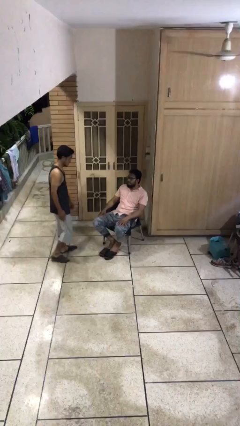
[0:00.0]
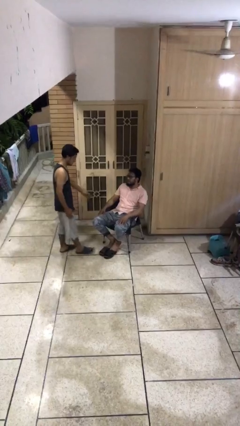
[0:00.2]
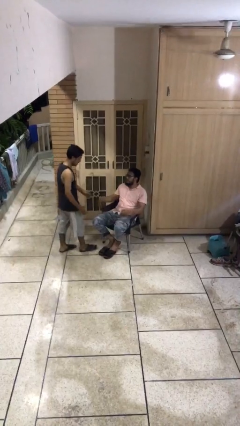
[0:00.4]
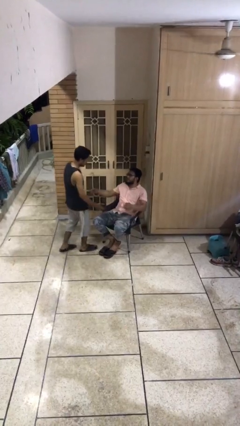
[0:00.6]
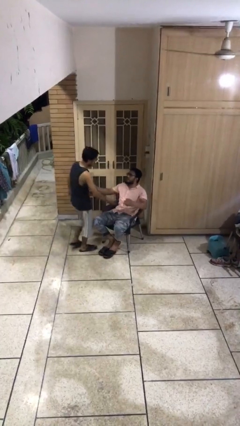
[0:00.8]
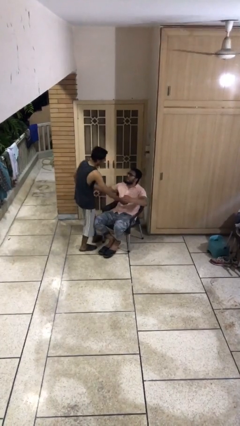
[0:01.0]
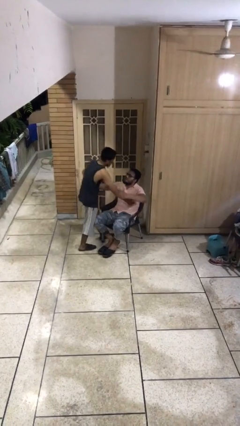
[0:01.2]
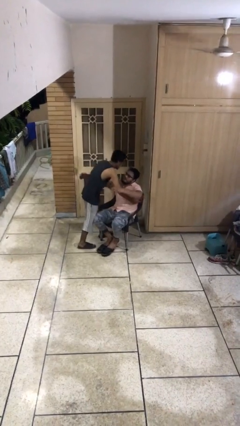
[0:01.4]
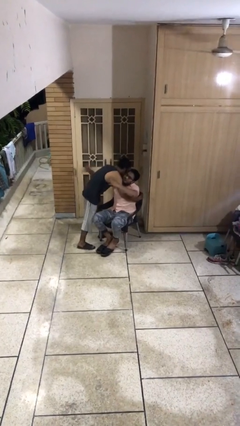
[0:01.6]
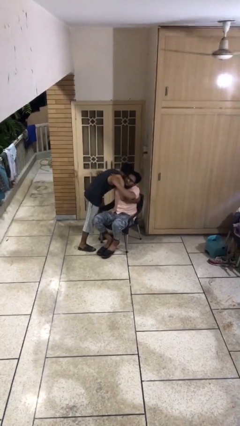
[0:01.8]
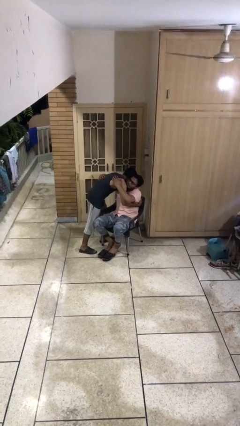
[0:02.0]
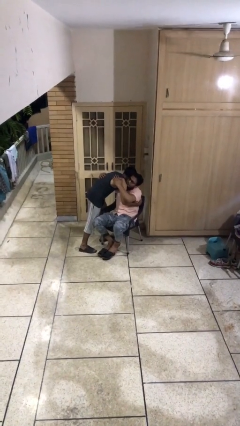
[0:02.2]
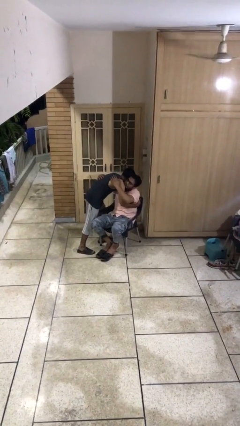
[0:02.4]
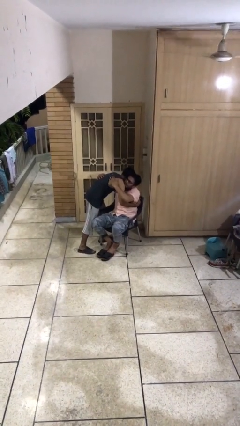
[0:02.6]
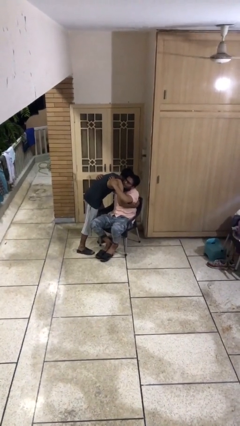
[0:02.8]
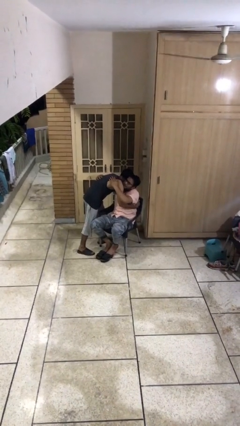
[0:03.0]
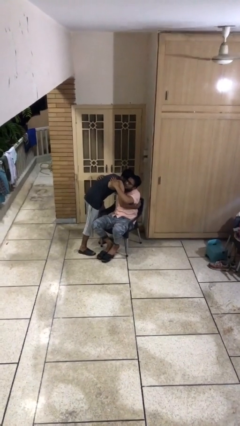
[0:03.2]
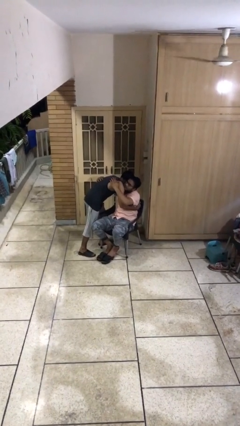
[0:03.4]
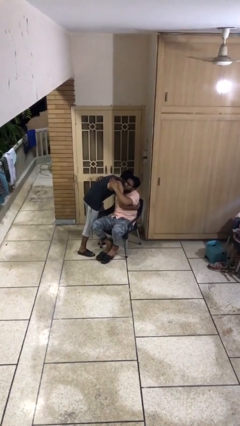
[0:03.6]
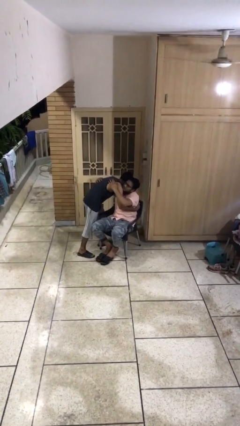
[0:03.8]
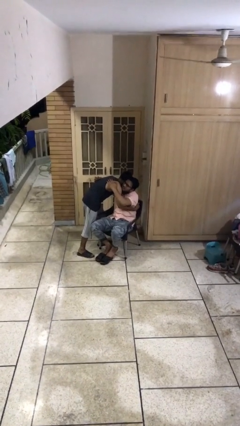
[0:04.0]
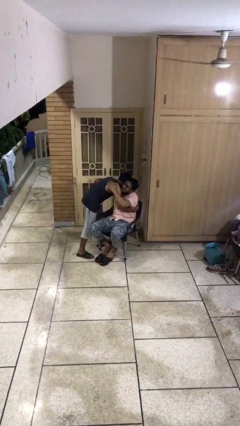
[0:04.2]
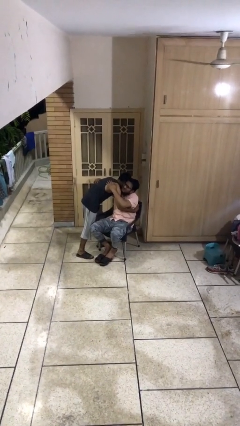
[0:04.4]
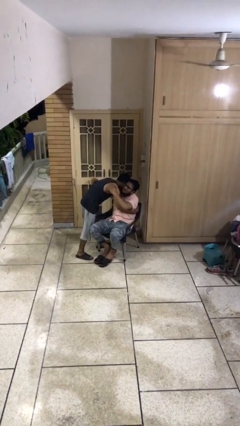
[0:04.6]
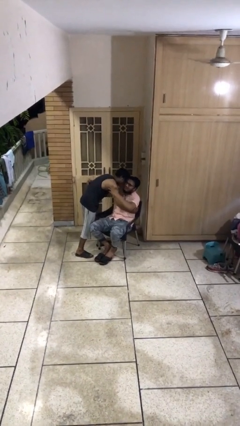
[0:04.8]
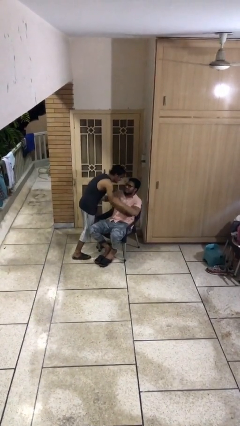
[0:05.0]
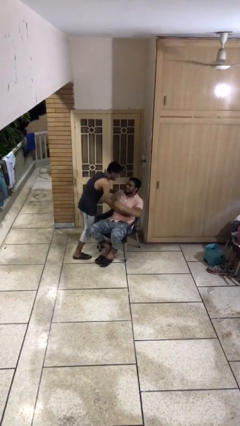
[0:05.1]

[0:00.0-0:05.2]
person embraces person

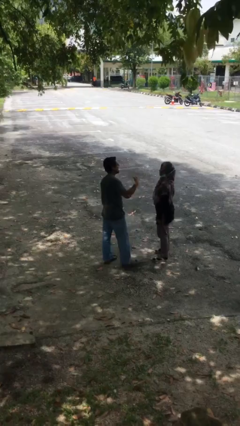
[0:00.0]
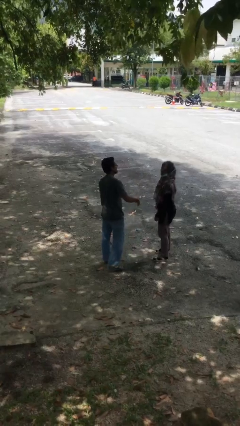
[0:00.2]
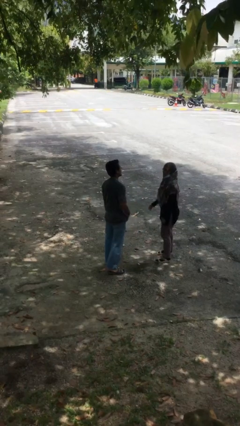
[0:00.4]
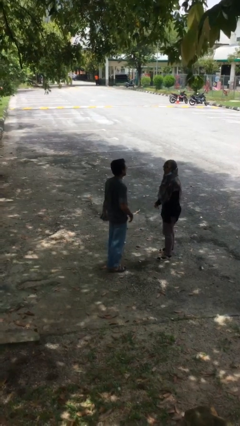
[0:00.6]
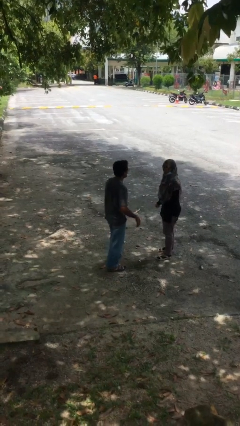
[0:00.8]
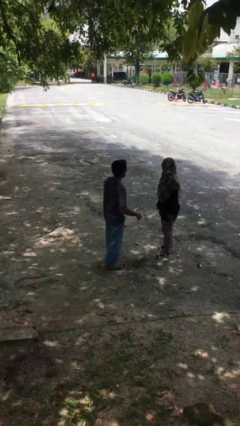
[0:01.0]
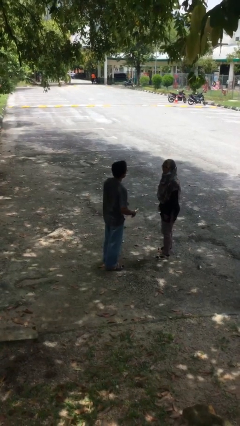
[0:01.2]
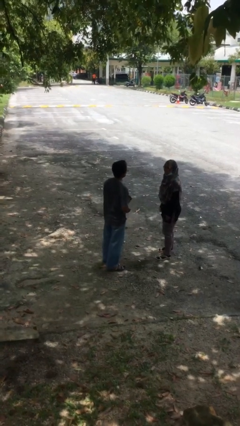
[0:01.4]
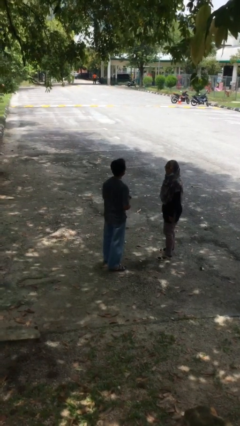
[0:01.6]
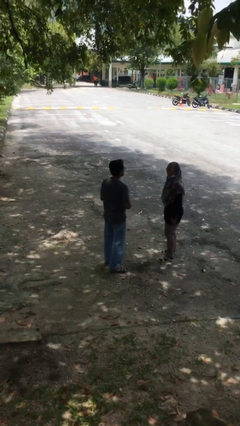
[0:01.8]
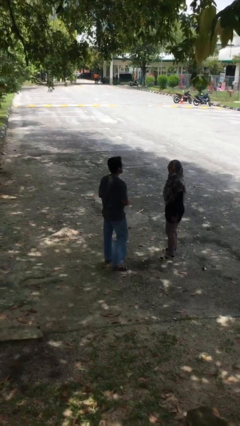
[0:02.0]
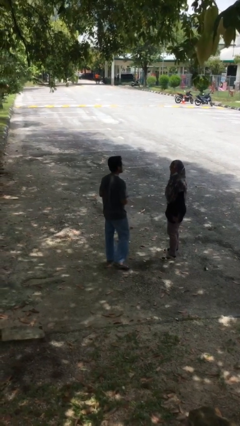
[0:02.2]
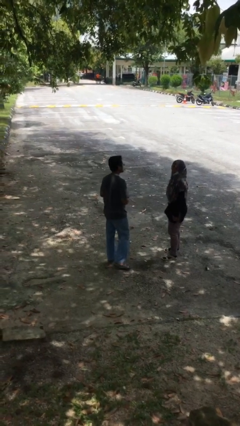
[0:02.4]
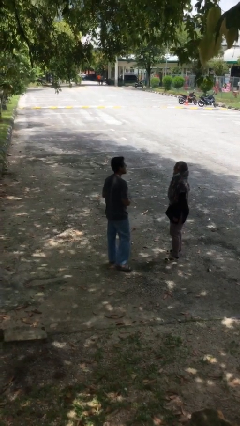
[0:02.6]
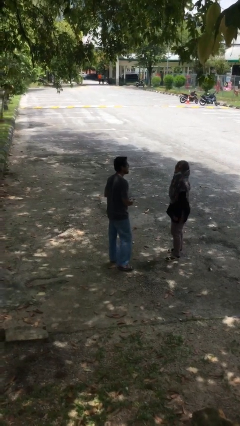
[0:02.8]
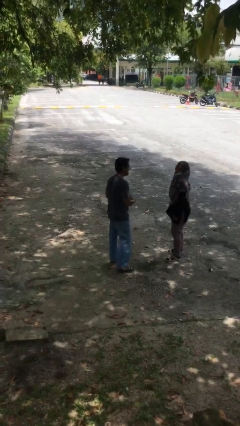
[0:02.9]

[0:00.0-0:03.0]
person talks to person

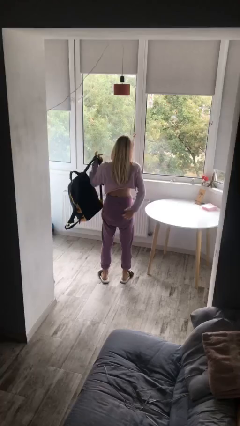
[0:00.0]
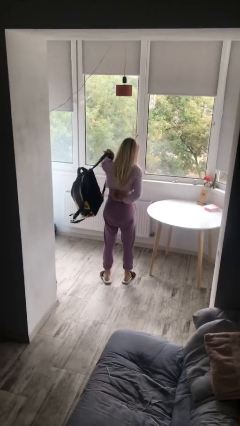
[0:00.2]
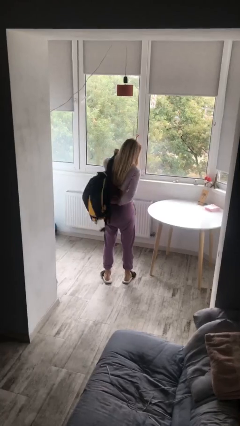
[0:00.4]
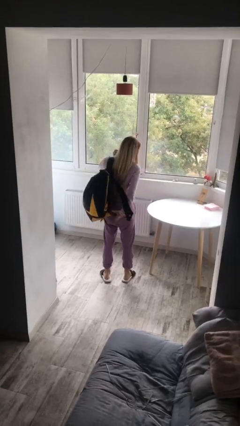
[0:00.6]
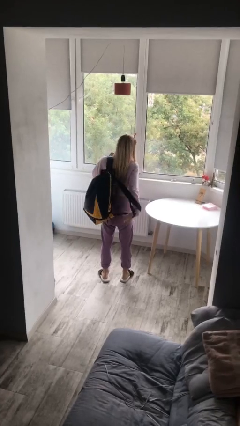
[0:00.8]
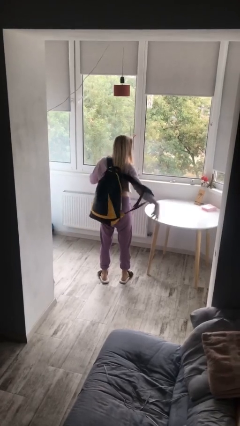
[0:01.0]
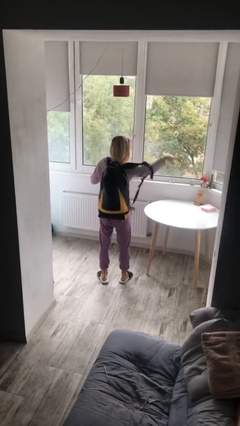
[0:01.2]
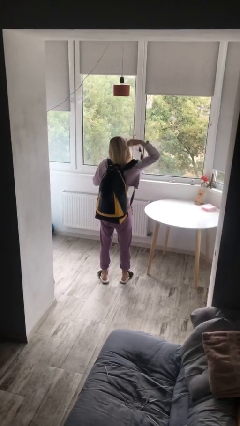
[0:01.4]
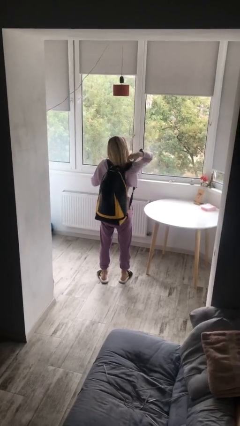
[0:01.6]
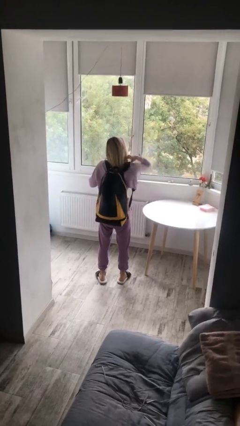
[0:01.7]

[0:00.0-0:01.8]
person puts on backpack

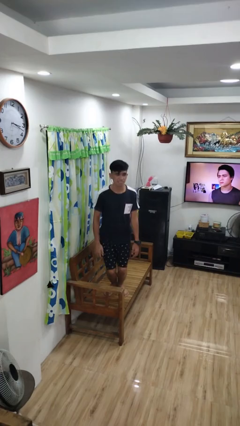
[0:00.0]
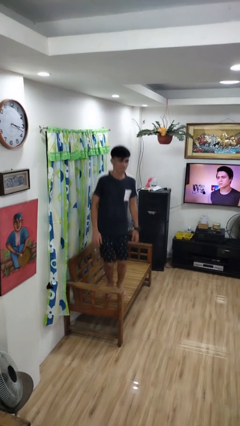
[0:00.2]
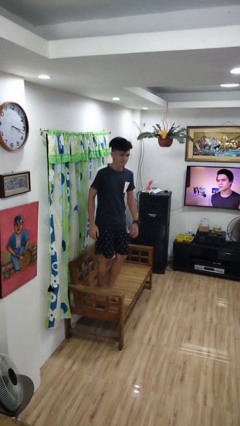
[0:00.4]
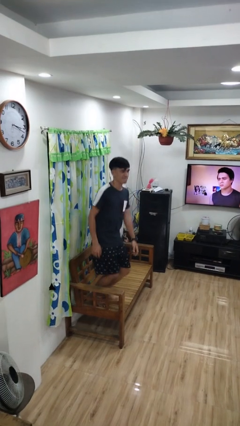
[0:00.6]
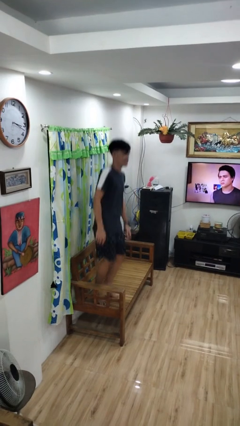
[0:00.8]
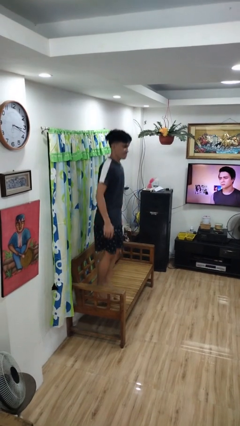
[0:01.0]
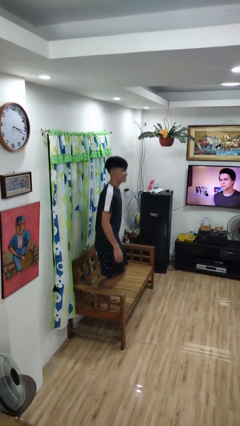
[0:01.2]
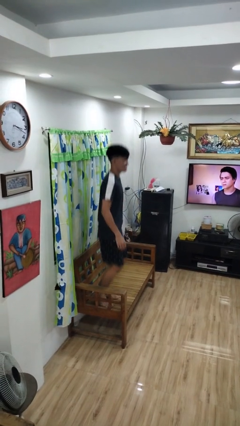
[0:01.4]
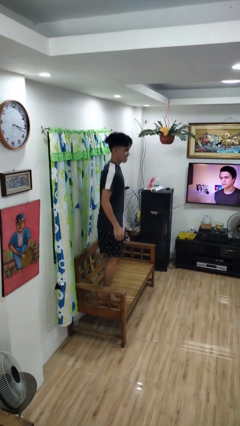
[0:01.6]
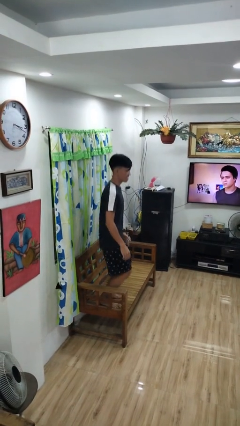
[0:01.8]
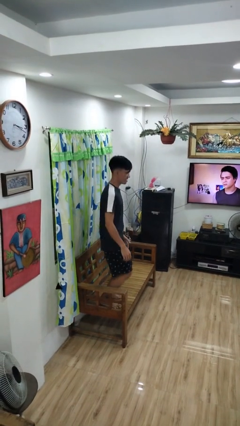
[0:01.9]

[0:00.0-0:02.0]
person jumps on couch

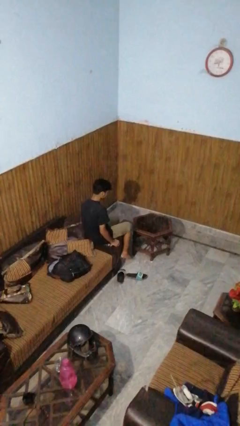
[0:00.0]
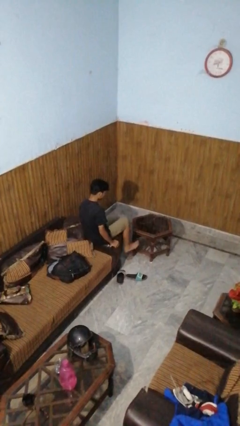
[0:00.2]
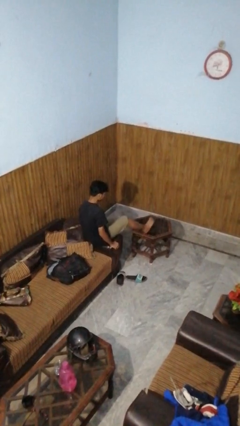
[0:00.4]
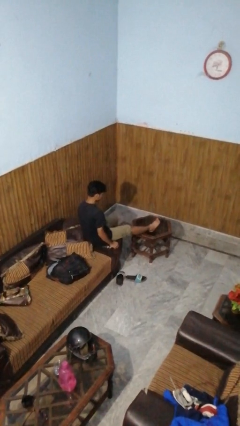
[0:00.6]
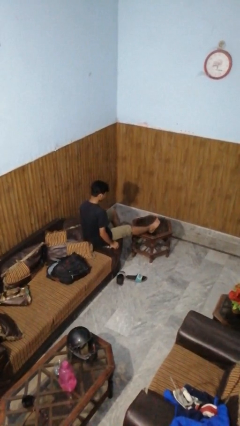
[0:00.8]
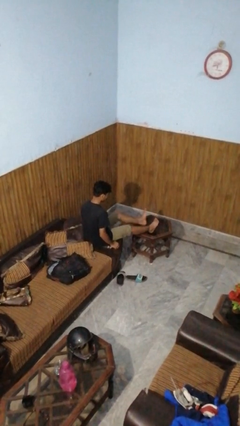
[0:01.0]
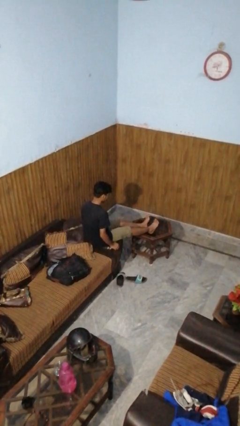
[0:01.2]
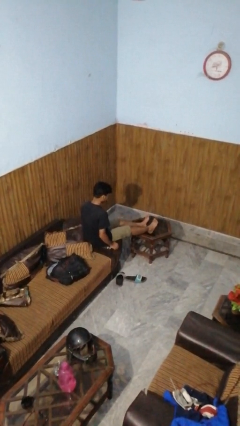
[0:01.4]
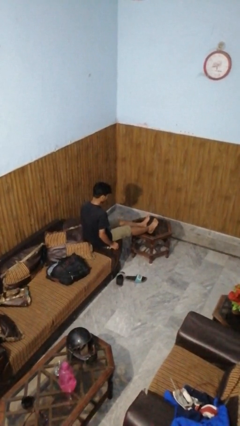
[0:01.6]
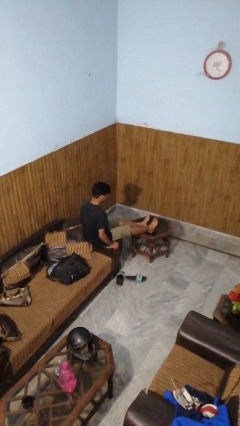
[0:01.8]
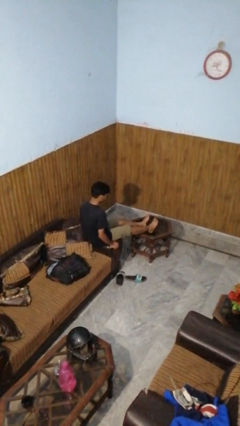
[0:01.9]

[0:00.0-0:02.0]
person puts feet up

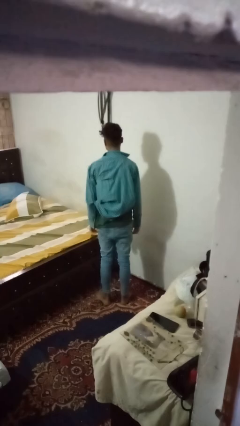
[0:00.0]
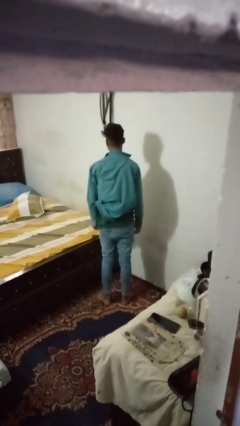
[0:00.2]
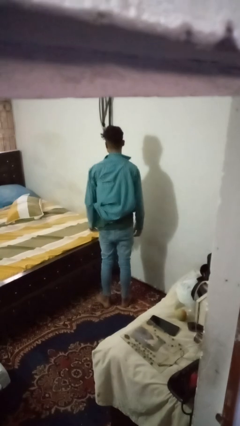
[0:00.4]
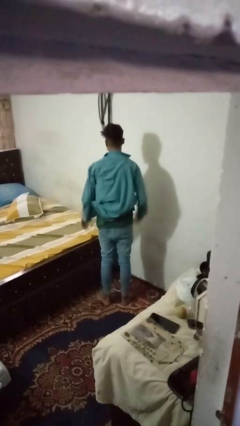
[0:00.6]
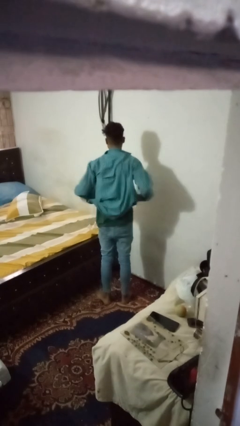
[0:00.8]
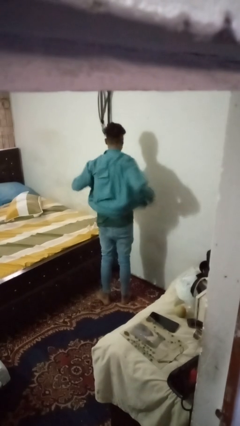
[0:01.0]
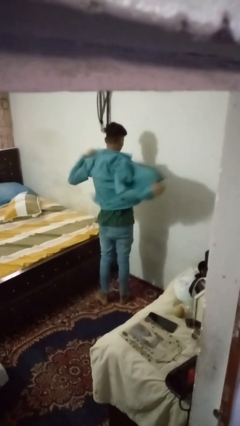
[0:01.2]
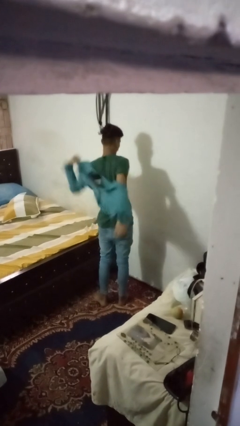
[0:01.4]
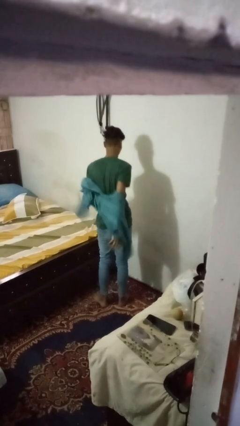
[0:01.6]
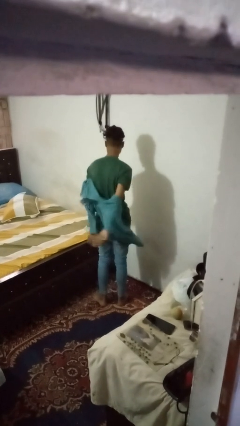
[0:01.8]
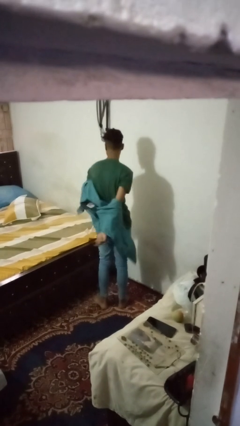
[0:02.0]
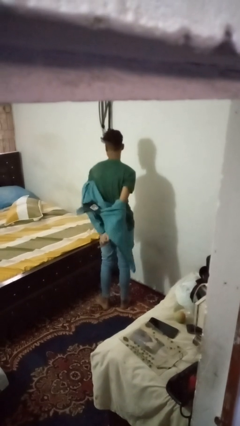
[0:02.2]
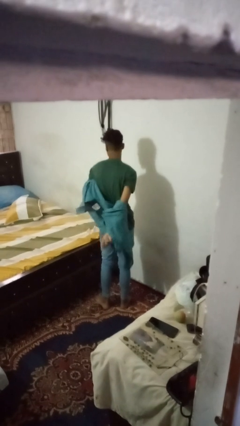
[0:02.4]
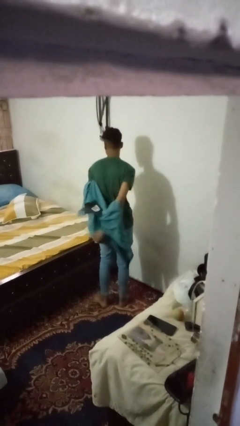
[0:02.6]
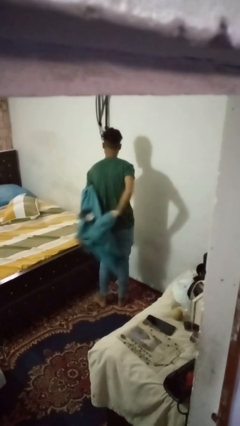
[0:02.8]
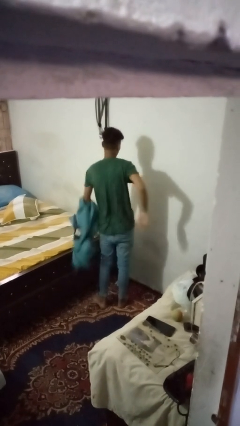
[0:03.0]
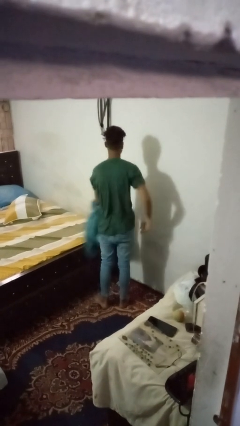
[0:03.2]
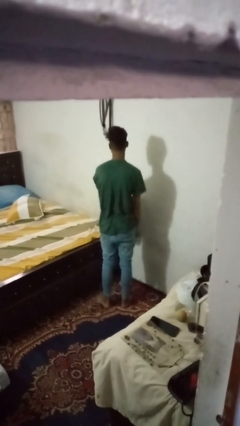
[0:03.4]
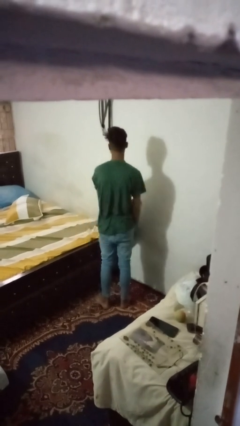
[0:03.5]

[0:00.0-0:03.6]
person takes off shirt
